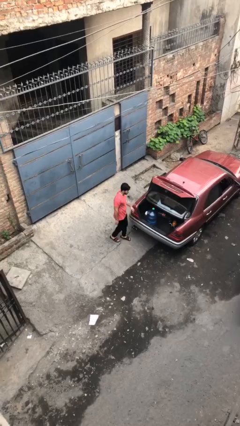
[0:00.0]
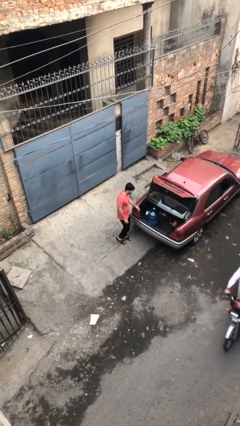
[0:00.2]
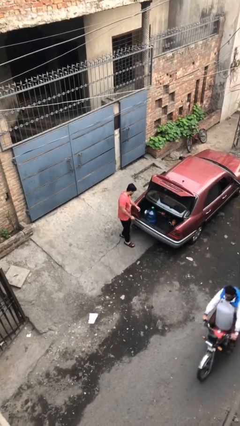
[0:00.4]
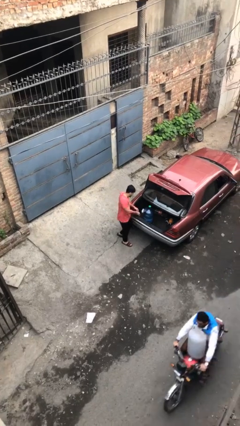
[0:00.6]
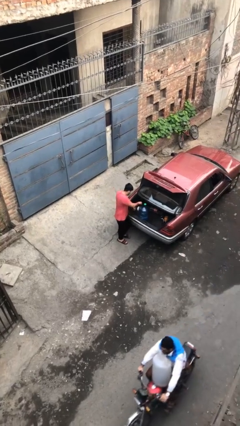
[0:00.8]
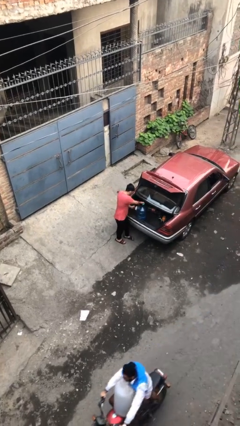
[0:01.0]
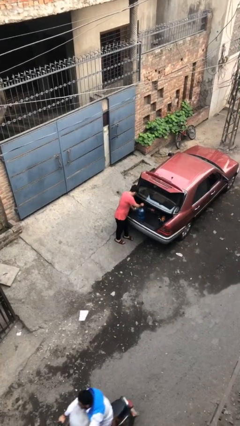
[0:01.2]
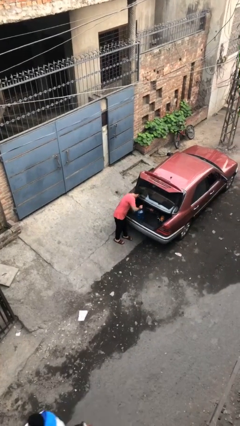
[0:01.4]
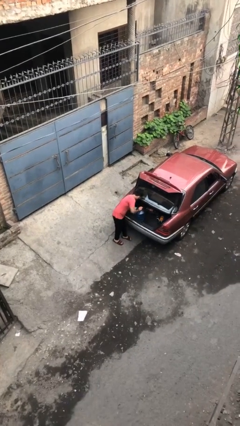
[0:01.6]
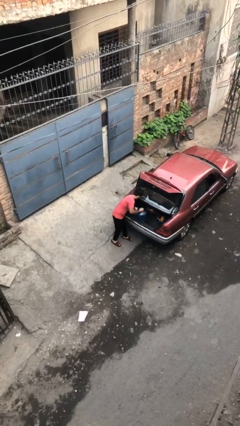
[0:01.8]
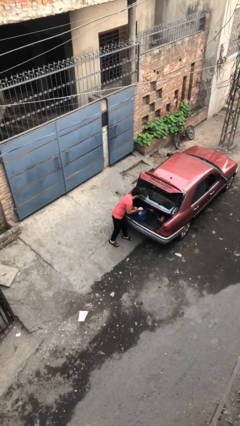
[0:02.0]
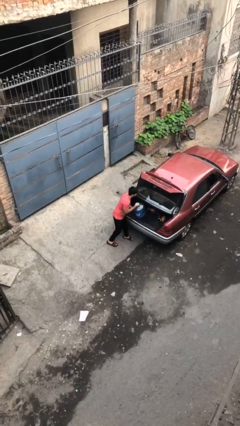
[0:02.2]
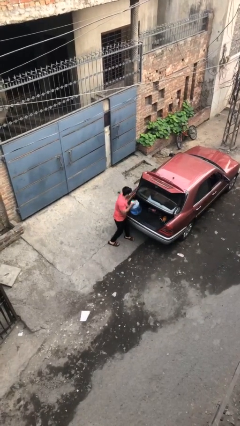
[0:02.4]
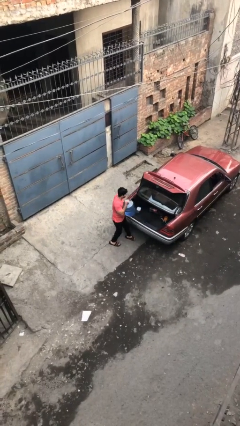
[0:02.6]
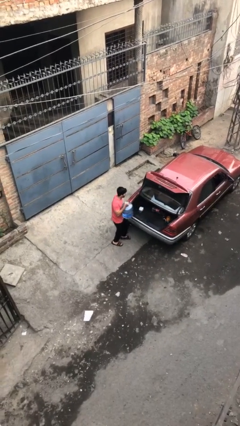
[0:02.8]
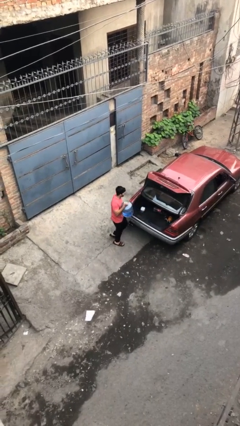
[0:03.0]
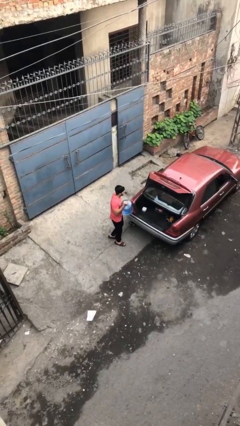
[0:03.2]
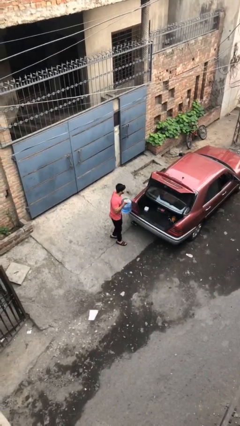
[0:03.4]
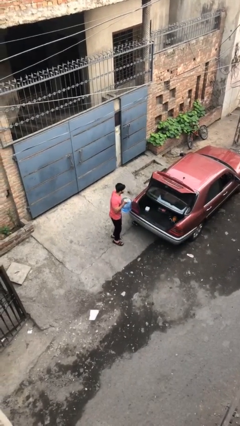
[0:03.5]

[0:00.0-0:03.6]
person unloads car

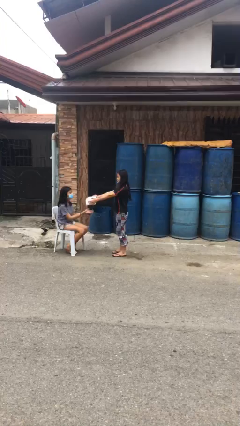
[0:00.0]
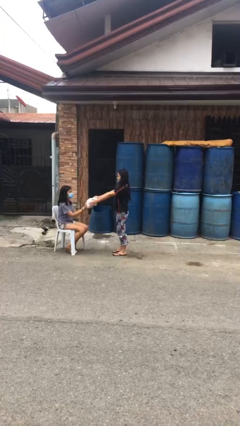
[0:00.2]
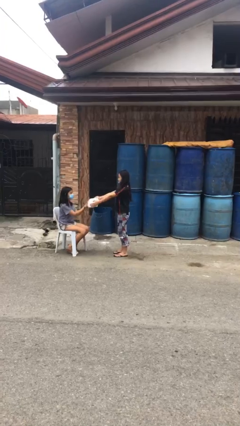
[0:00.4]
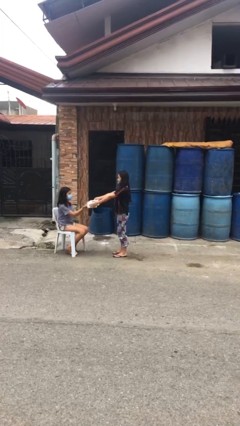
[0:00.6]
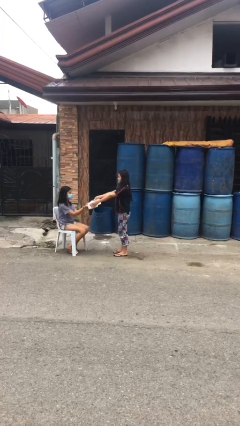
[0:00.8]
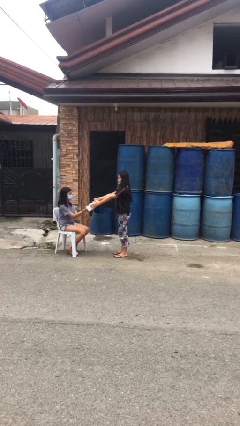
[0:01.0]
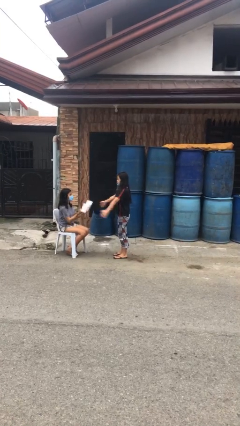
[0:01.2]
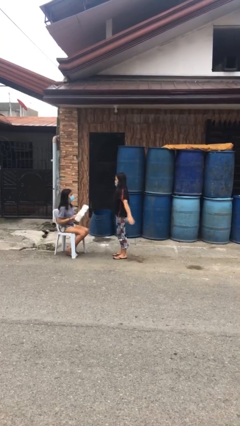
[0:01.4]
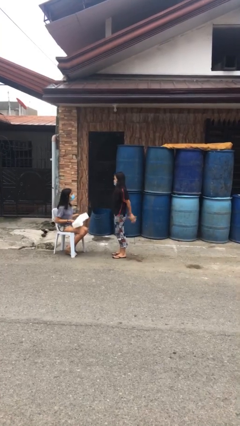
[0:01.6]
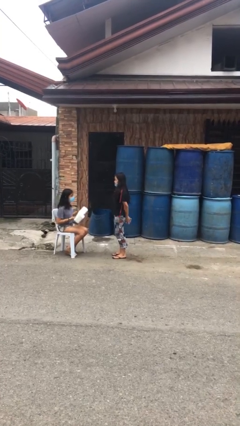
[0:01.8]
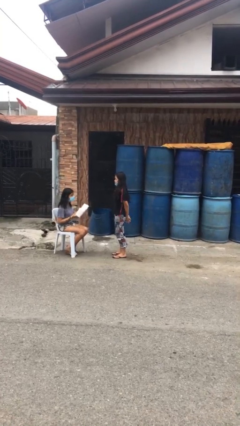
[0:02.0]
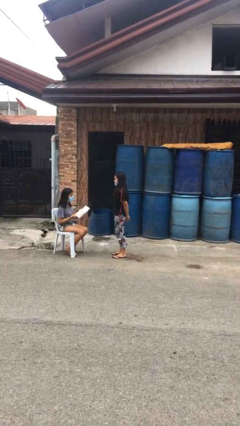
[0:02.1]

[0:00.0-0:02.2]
person transfers object to person

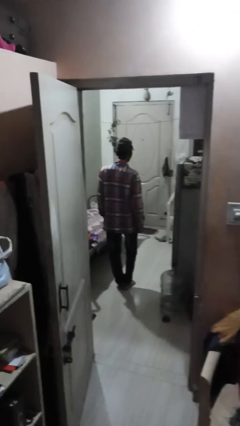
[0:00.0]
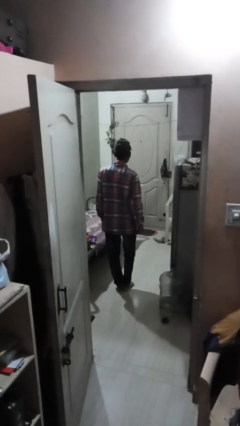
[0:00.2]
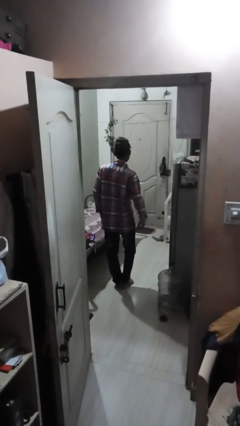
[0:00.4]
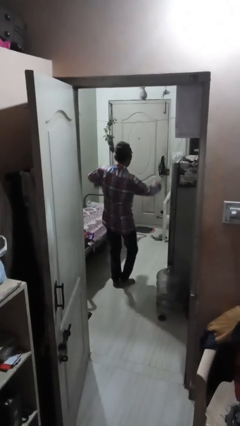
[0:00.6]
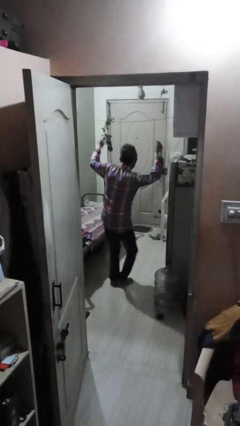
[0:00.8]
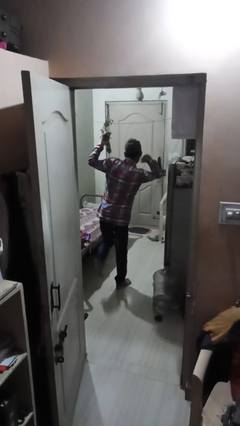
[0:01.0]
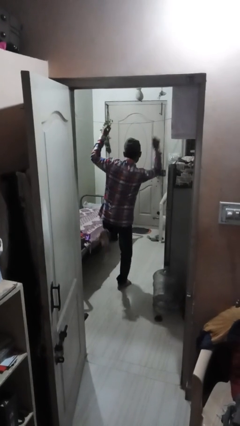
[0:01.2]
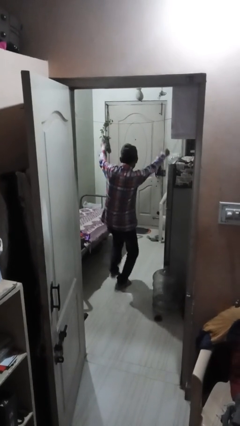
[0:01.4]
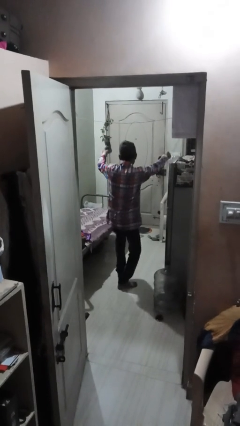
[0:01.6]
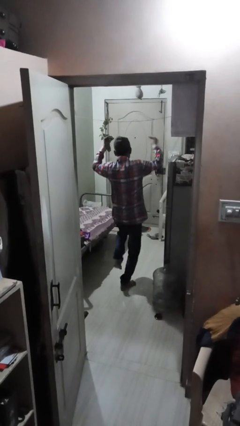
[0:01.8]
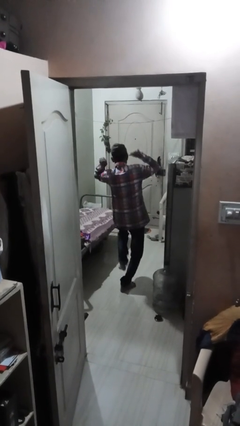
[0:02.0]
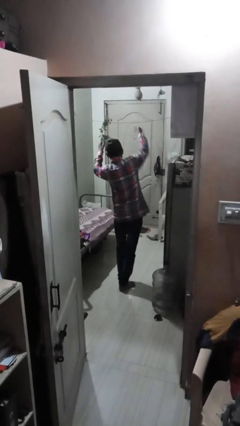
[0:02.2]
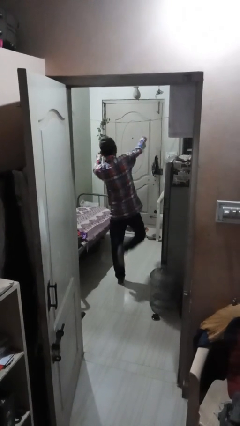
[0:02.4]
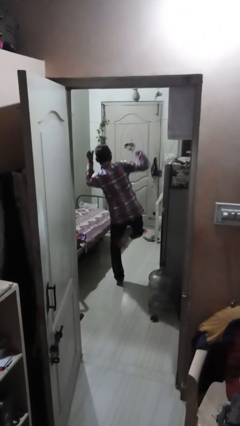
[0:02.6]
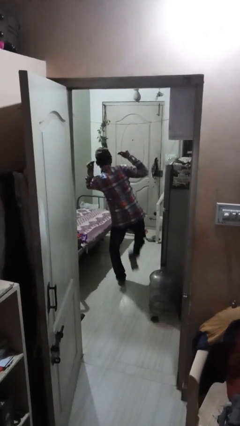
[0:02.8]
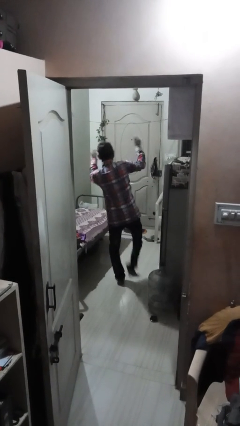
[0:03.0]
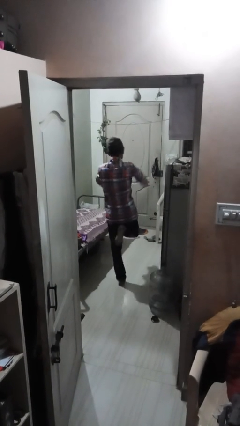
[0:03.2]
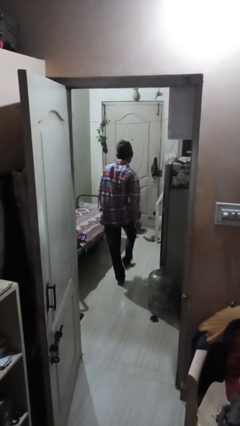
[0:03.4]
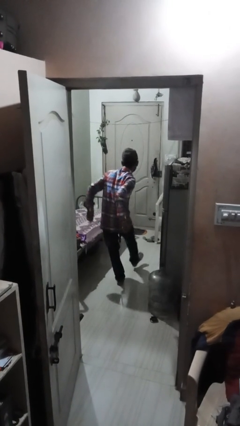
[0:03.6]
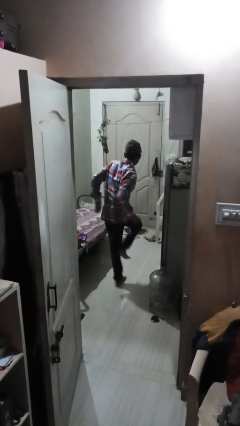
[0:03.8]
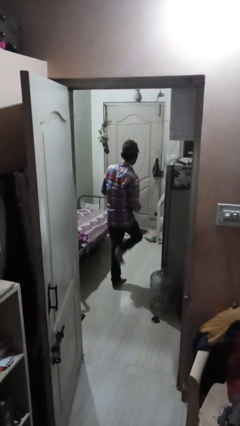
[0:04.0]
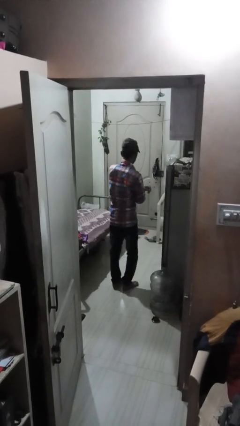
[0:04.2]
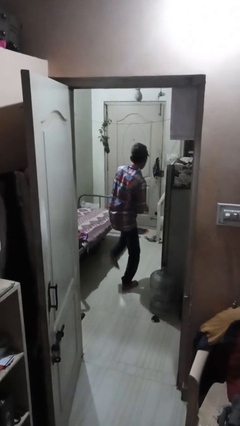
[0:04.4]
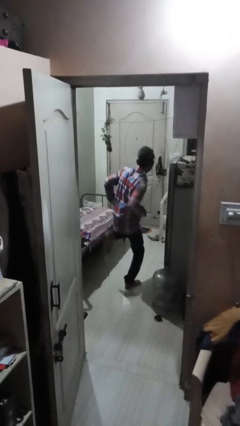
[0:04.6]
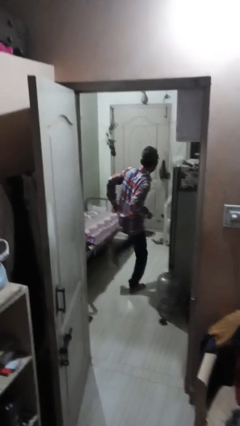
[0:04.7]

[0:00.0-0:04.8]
person dances in place

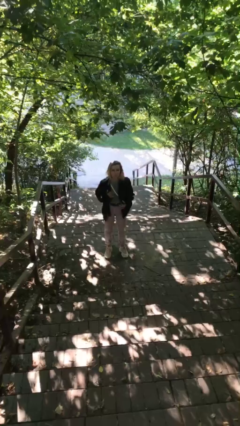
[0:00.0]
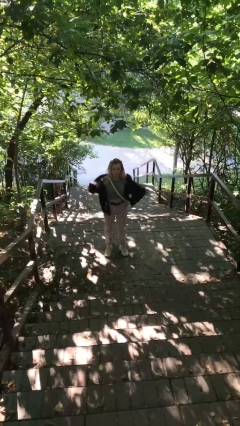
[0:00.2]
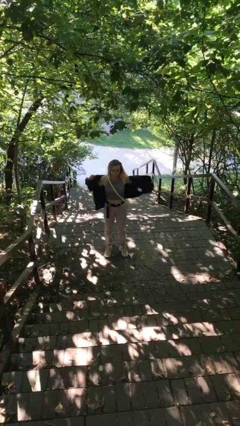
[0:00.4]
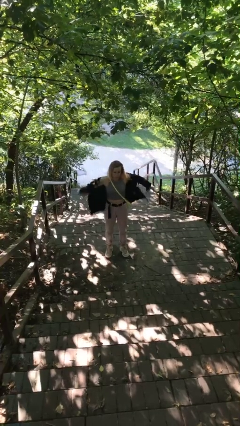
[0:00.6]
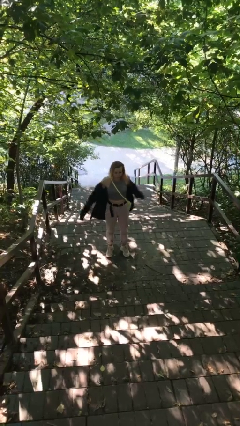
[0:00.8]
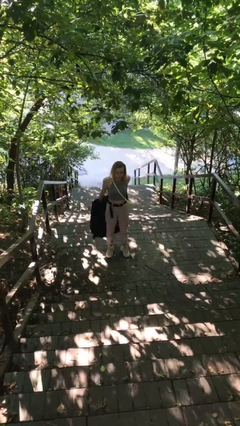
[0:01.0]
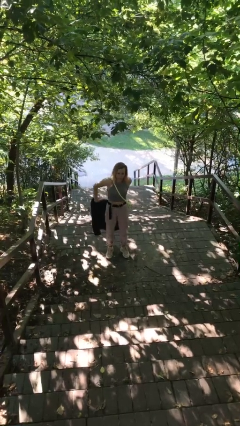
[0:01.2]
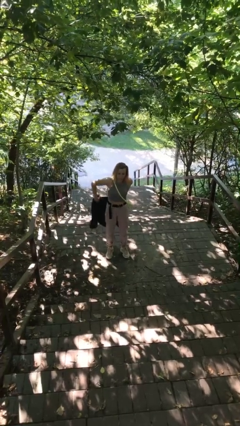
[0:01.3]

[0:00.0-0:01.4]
person takes off jacket

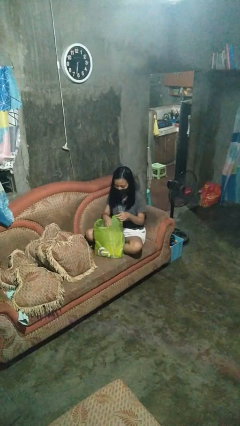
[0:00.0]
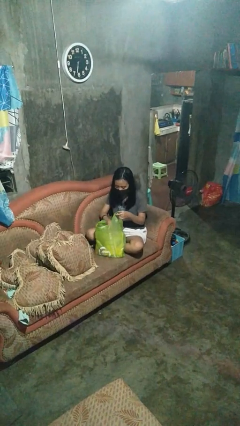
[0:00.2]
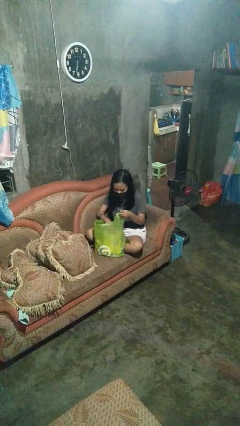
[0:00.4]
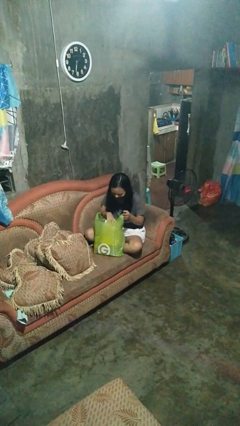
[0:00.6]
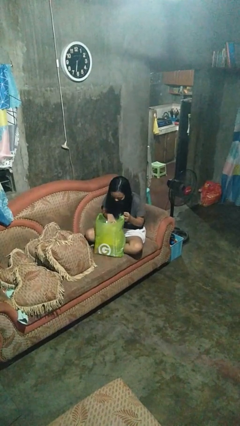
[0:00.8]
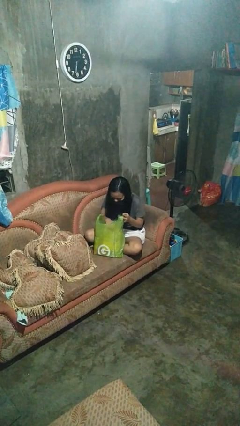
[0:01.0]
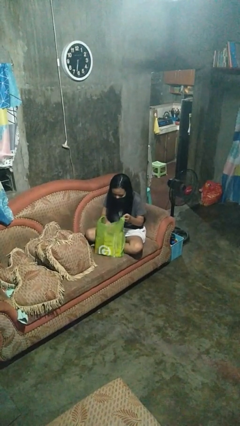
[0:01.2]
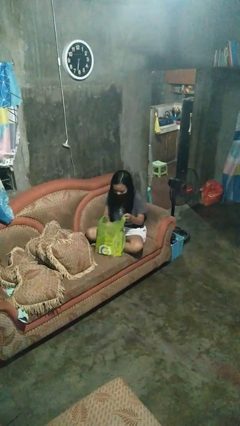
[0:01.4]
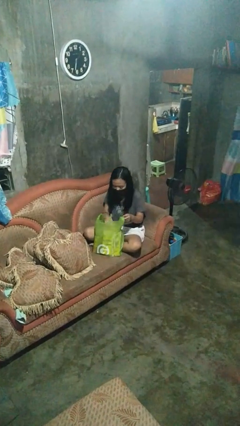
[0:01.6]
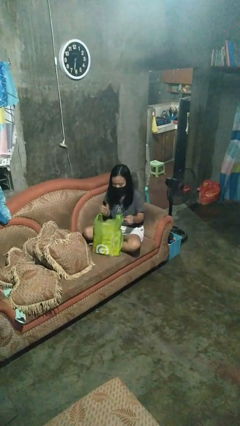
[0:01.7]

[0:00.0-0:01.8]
person searches in bag

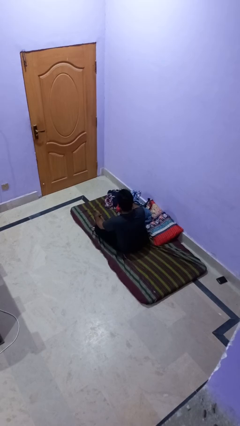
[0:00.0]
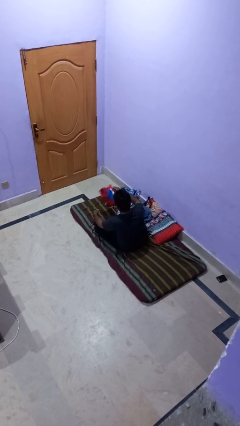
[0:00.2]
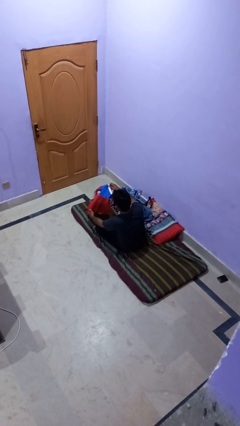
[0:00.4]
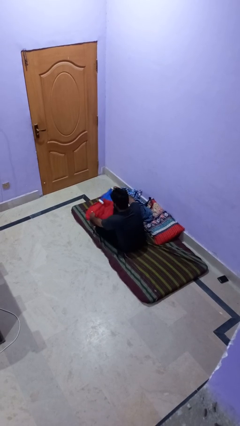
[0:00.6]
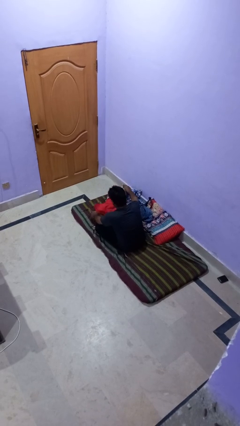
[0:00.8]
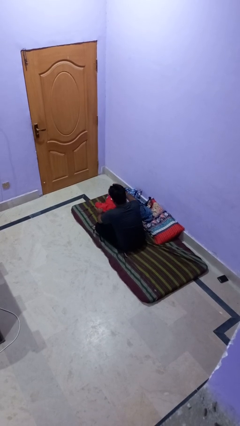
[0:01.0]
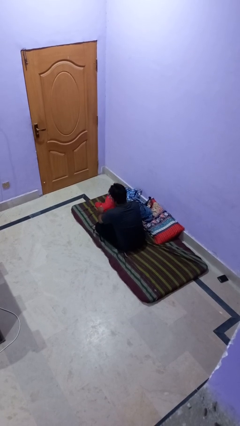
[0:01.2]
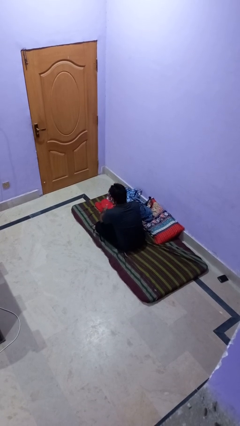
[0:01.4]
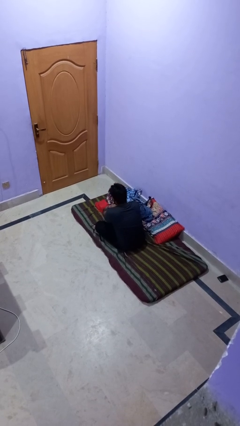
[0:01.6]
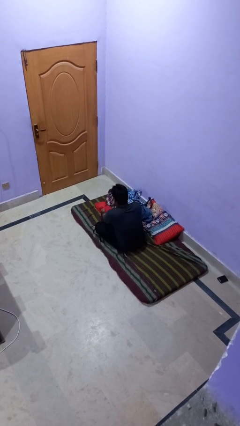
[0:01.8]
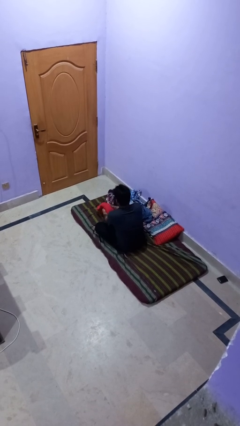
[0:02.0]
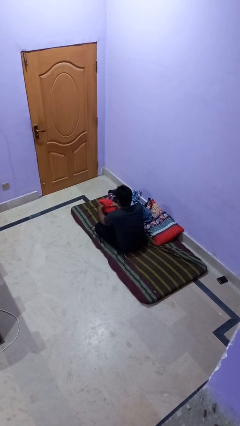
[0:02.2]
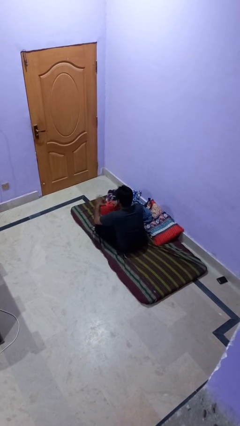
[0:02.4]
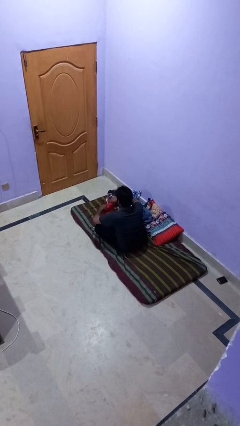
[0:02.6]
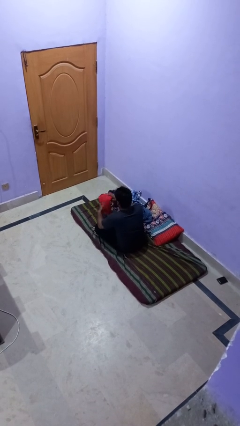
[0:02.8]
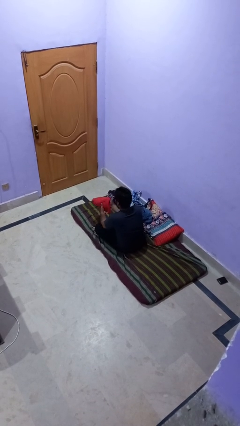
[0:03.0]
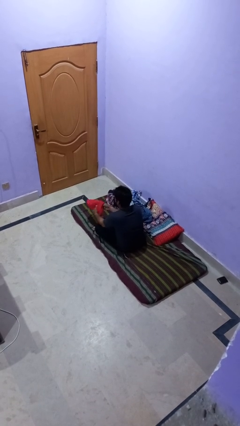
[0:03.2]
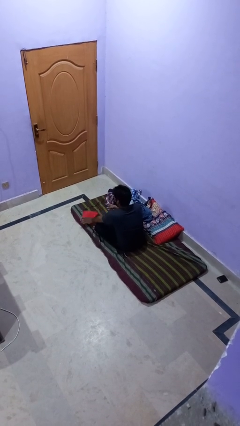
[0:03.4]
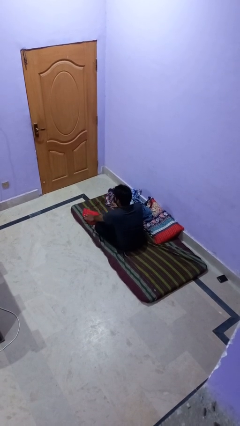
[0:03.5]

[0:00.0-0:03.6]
person folds shirt
